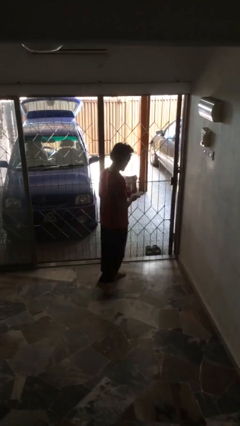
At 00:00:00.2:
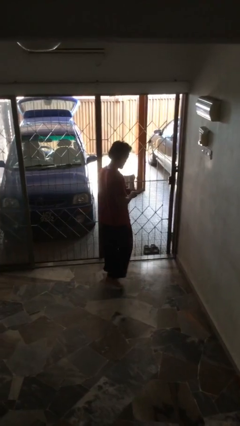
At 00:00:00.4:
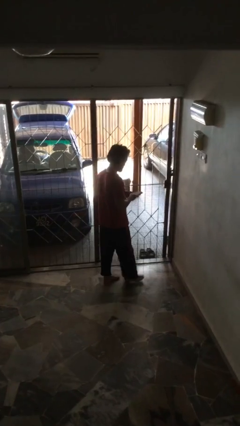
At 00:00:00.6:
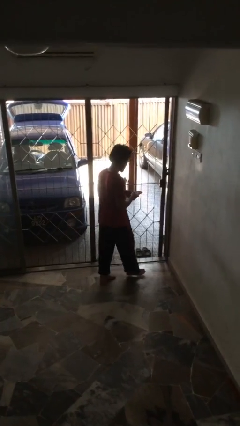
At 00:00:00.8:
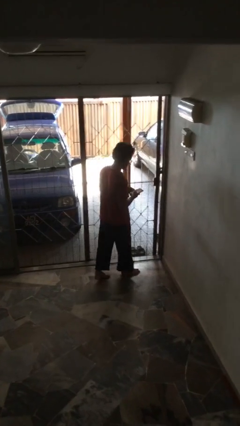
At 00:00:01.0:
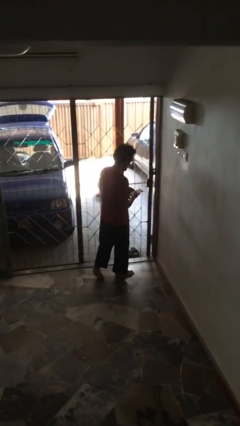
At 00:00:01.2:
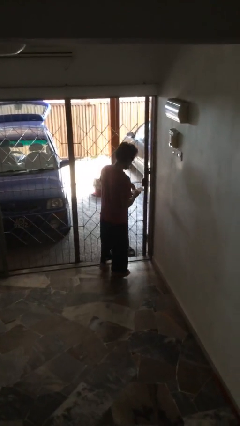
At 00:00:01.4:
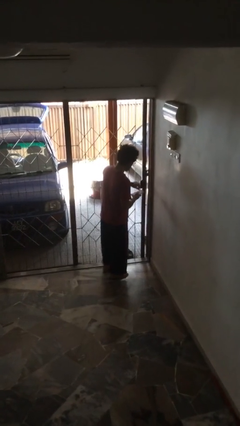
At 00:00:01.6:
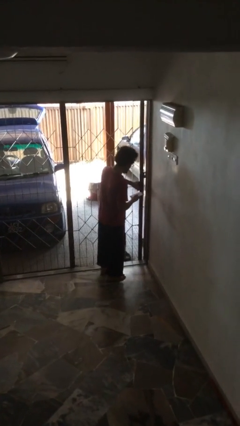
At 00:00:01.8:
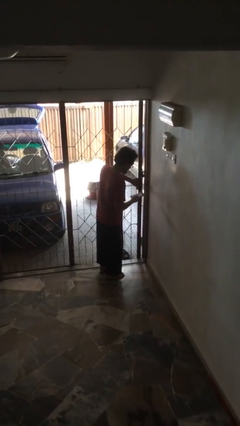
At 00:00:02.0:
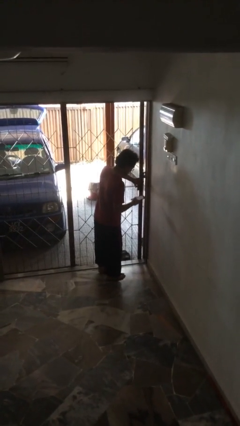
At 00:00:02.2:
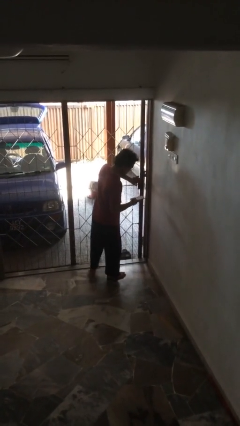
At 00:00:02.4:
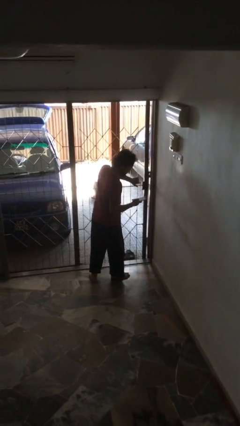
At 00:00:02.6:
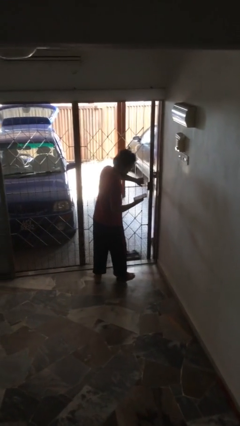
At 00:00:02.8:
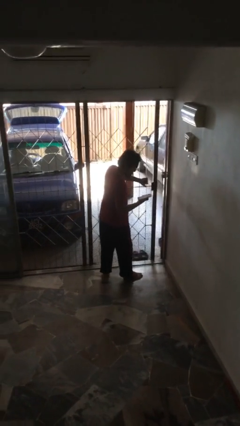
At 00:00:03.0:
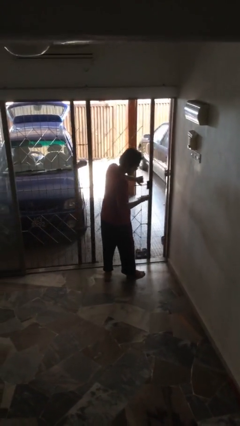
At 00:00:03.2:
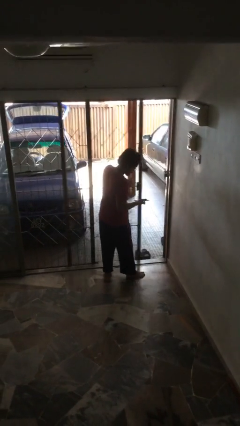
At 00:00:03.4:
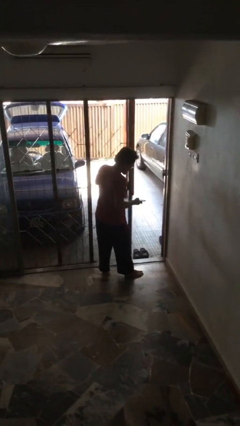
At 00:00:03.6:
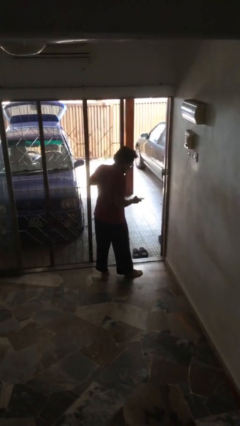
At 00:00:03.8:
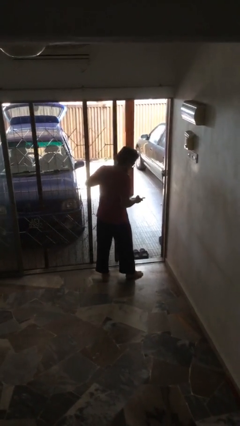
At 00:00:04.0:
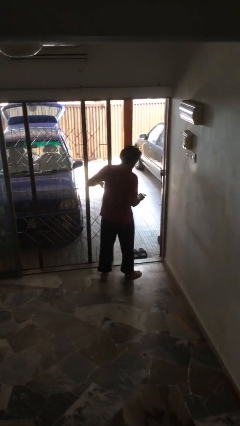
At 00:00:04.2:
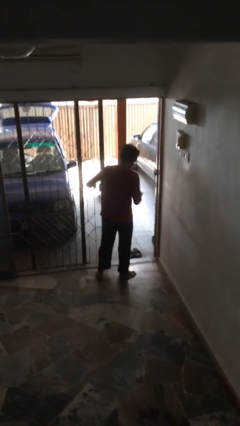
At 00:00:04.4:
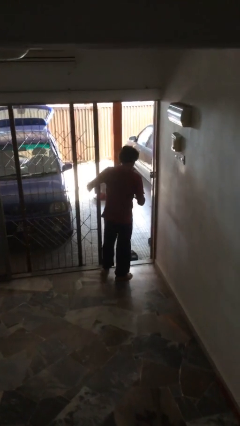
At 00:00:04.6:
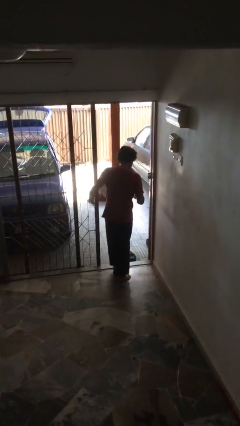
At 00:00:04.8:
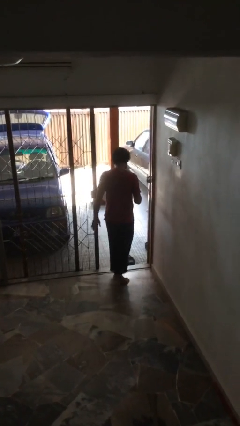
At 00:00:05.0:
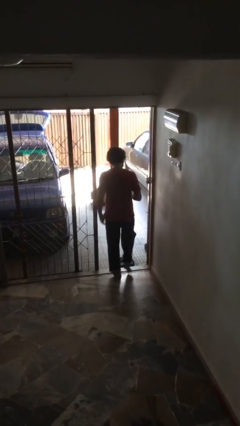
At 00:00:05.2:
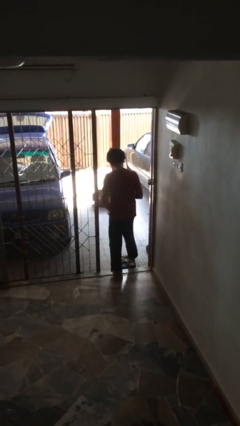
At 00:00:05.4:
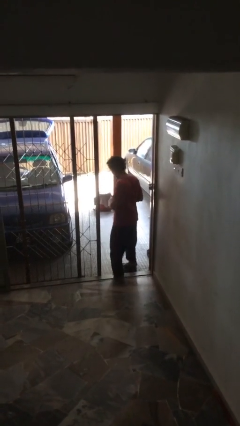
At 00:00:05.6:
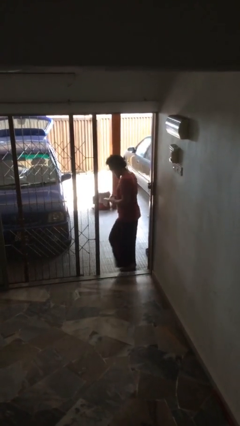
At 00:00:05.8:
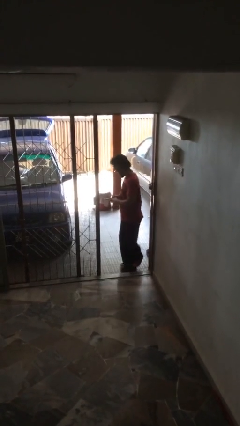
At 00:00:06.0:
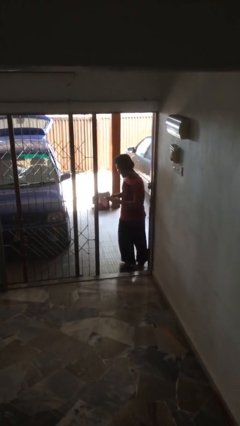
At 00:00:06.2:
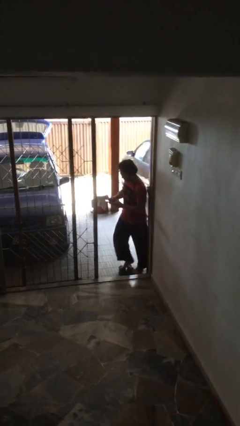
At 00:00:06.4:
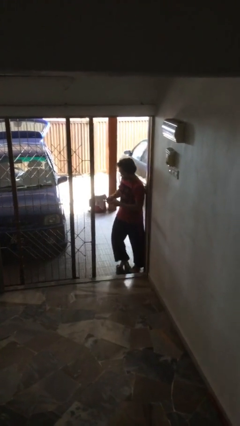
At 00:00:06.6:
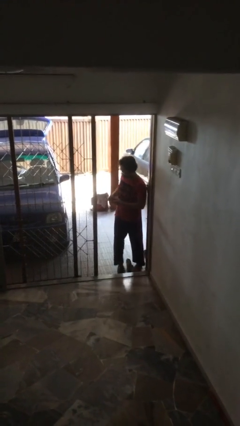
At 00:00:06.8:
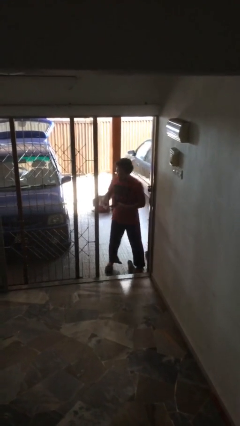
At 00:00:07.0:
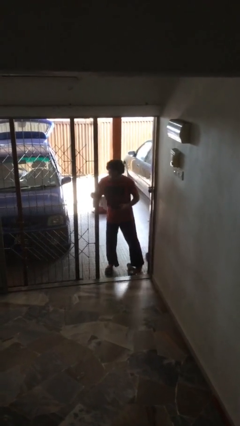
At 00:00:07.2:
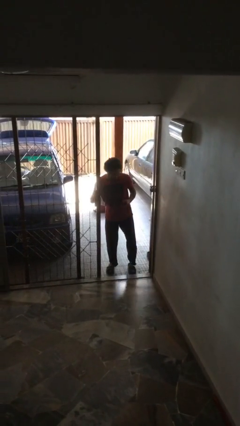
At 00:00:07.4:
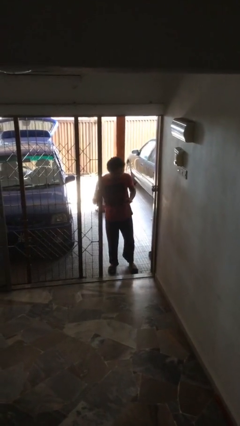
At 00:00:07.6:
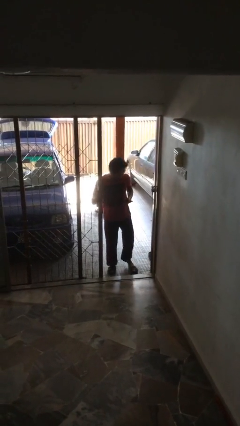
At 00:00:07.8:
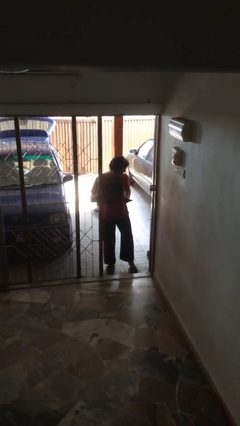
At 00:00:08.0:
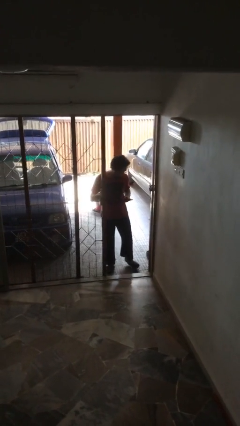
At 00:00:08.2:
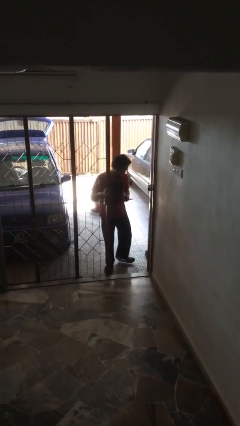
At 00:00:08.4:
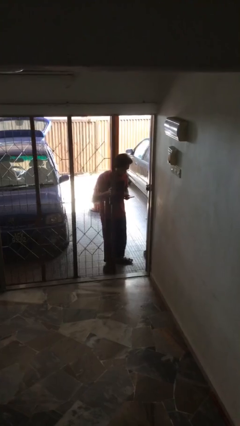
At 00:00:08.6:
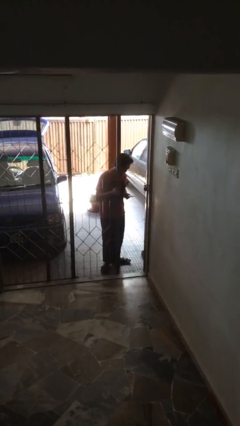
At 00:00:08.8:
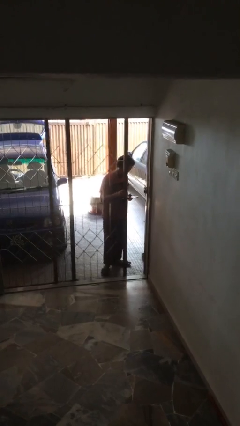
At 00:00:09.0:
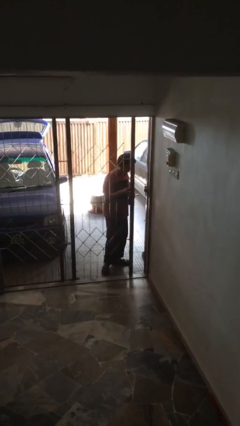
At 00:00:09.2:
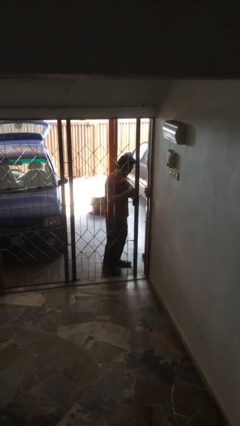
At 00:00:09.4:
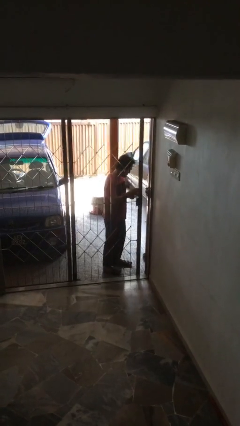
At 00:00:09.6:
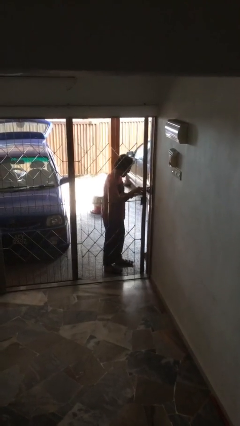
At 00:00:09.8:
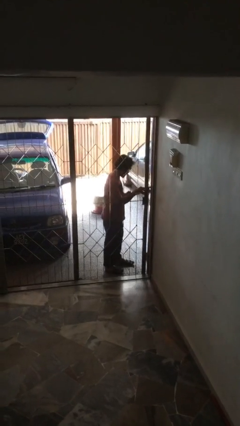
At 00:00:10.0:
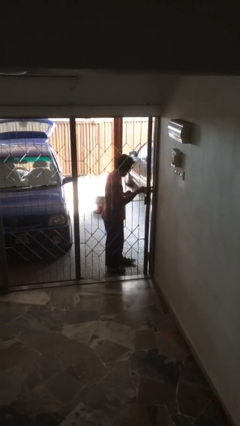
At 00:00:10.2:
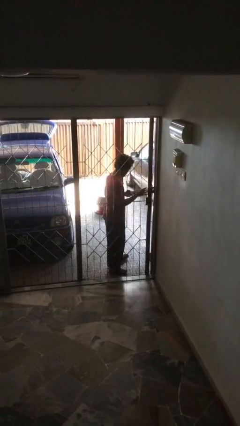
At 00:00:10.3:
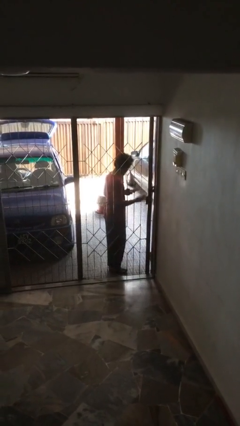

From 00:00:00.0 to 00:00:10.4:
person texts on phone

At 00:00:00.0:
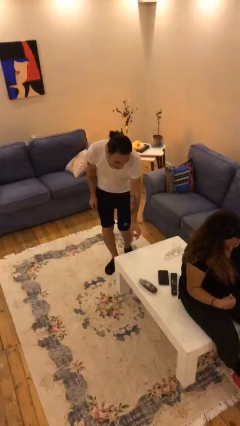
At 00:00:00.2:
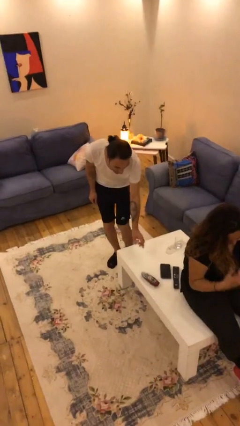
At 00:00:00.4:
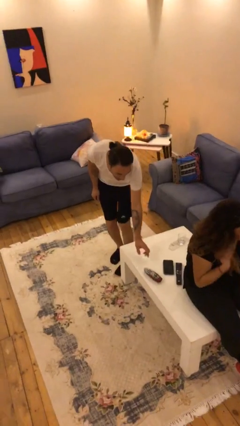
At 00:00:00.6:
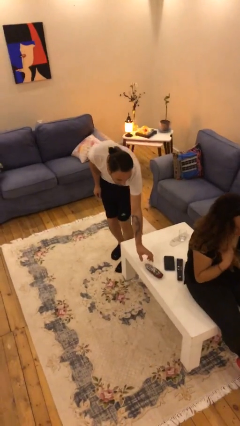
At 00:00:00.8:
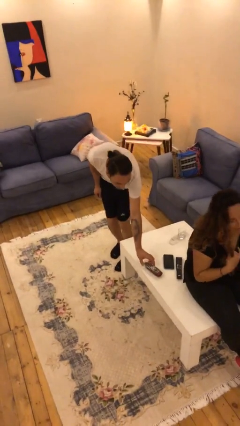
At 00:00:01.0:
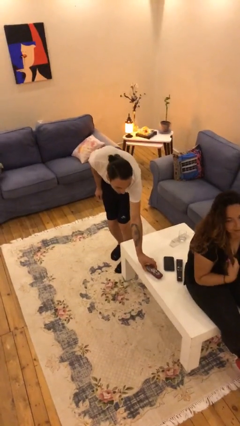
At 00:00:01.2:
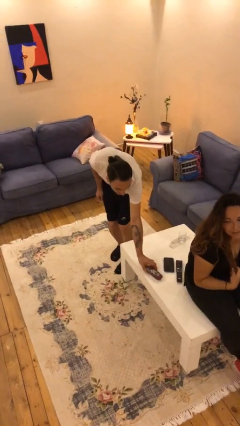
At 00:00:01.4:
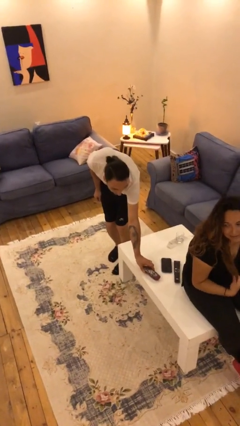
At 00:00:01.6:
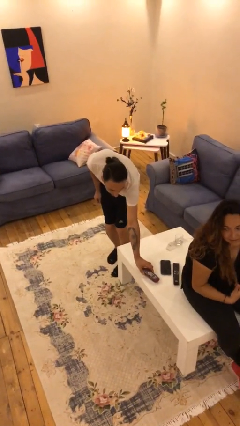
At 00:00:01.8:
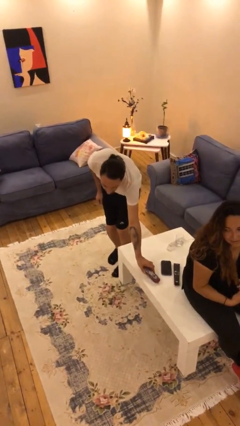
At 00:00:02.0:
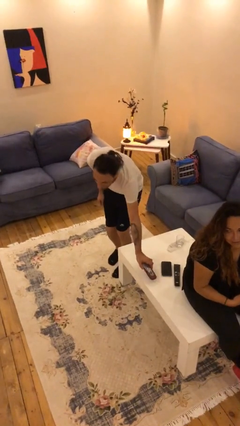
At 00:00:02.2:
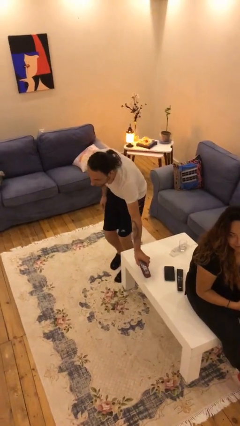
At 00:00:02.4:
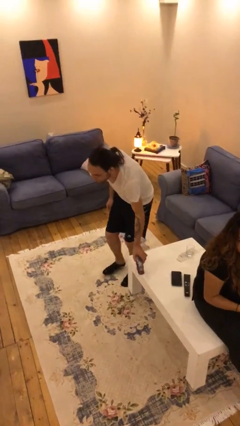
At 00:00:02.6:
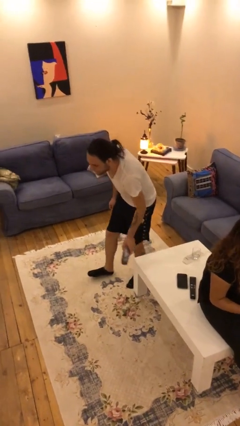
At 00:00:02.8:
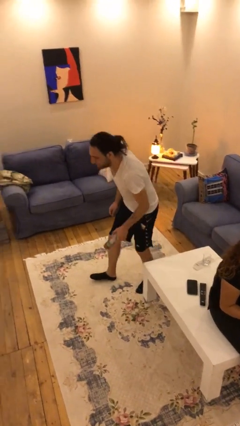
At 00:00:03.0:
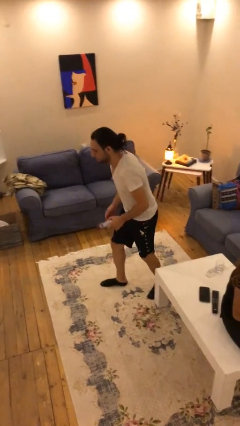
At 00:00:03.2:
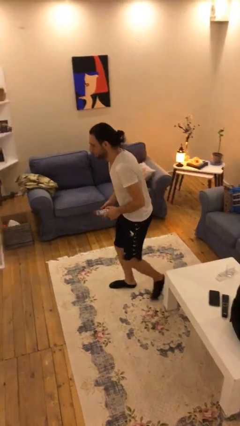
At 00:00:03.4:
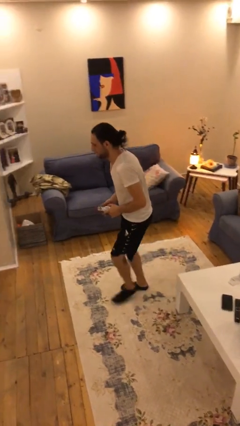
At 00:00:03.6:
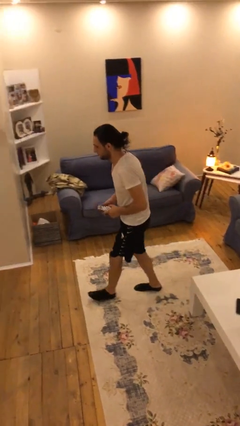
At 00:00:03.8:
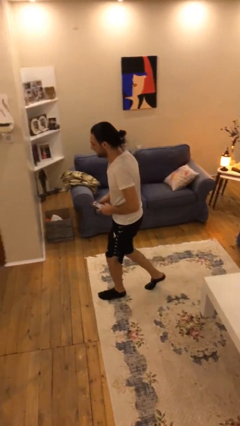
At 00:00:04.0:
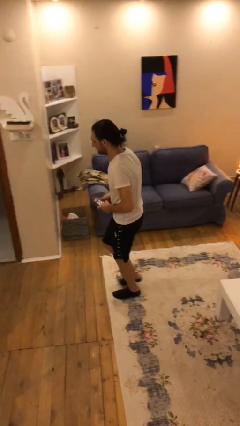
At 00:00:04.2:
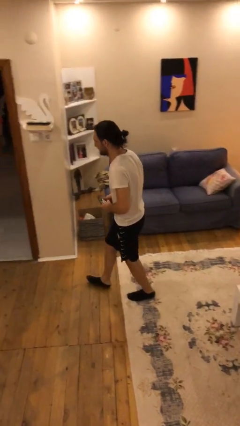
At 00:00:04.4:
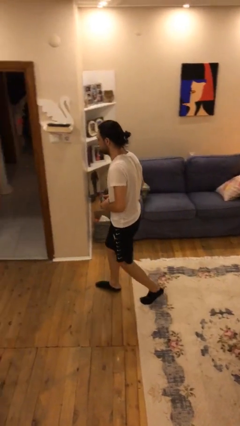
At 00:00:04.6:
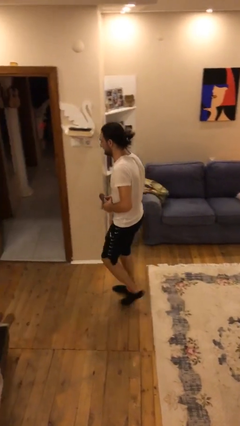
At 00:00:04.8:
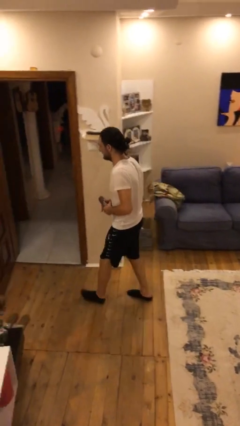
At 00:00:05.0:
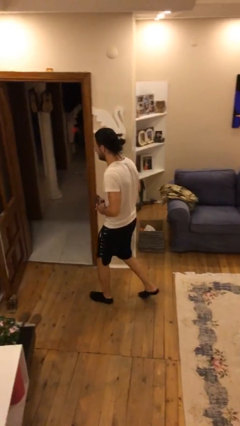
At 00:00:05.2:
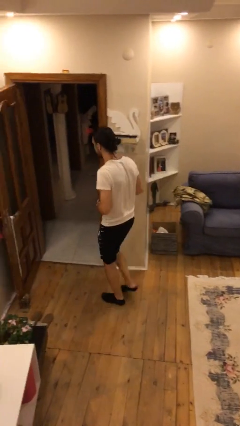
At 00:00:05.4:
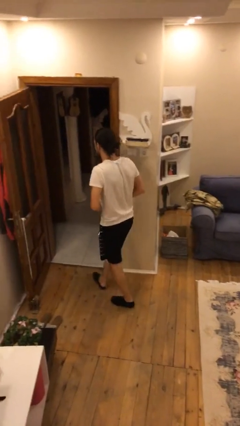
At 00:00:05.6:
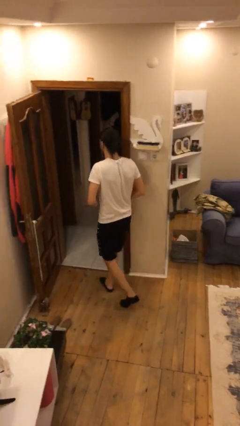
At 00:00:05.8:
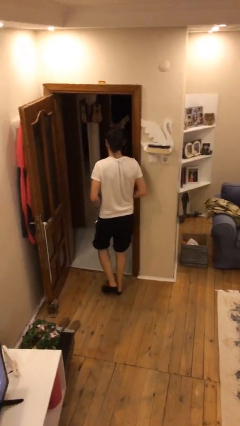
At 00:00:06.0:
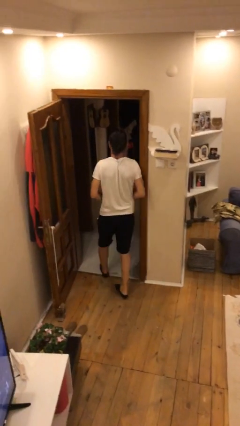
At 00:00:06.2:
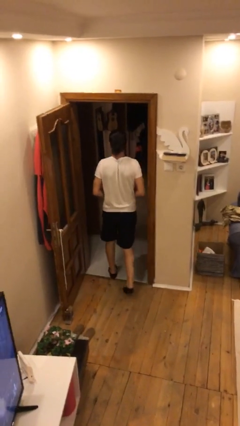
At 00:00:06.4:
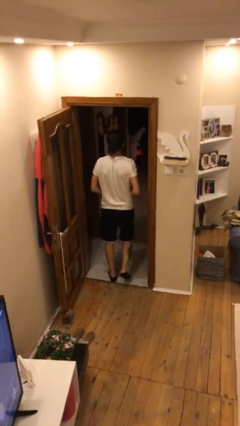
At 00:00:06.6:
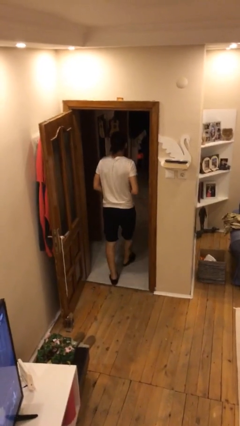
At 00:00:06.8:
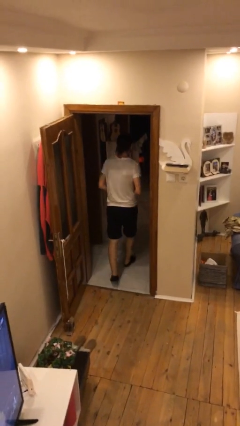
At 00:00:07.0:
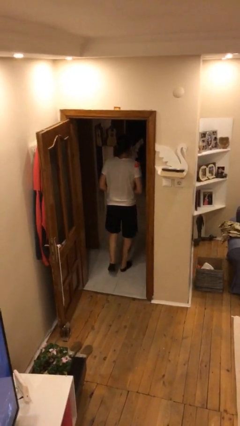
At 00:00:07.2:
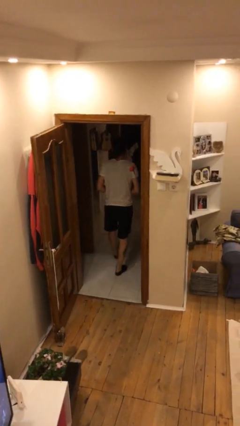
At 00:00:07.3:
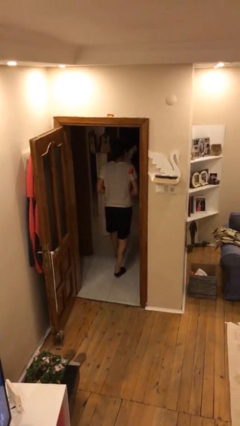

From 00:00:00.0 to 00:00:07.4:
person steals object from person

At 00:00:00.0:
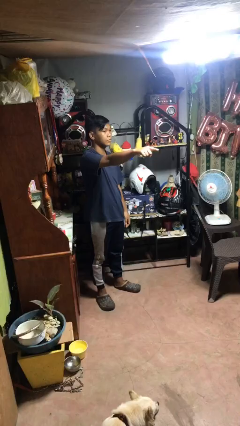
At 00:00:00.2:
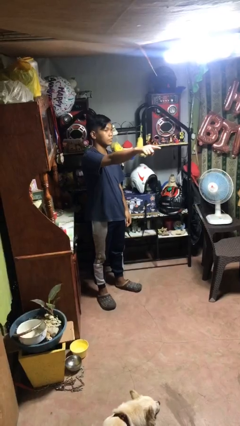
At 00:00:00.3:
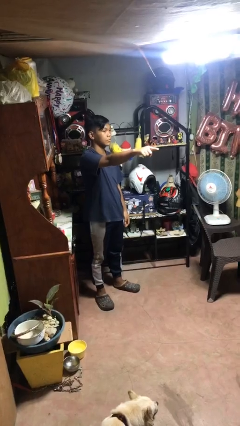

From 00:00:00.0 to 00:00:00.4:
person points at person
